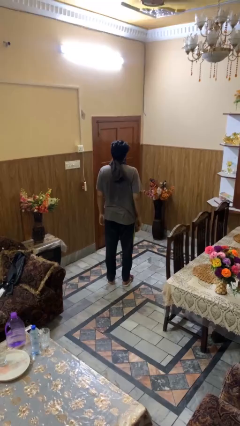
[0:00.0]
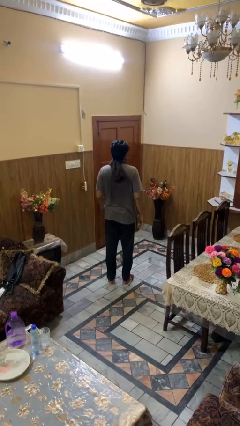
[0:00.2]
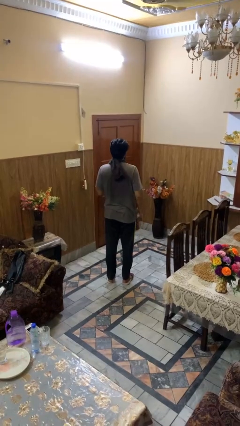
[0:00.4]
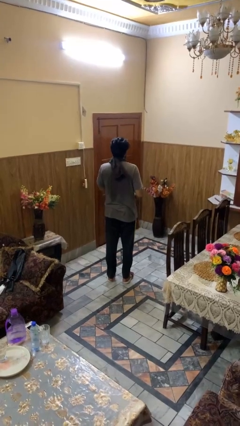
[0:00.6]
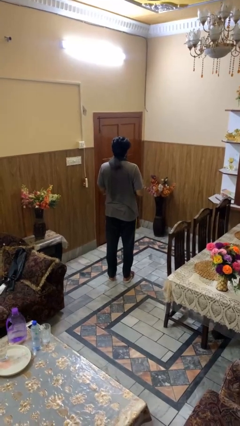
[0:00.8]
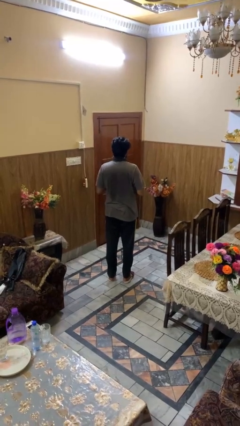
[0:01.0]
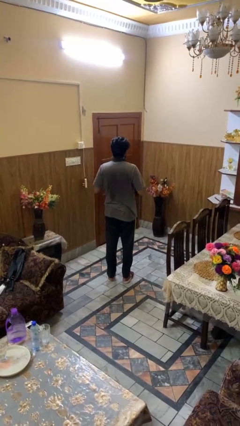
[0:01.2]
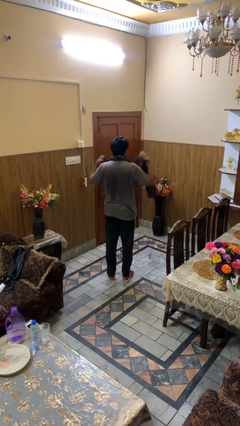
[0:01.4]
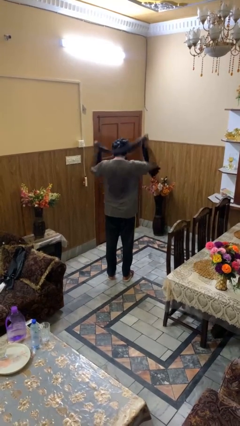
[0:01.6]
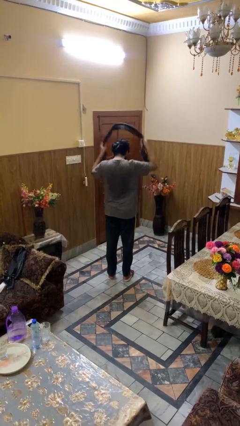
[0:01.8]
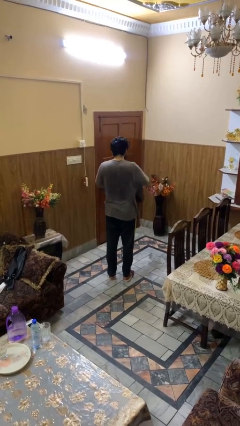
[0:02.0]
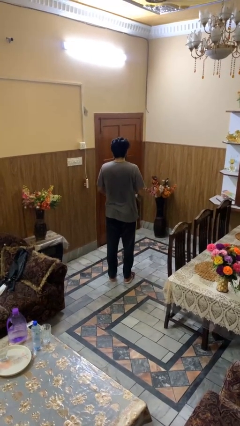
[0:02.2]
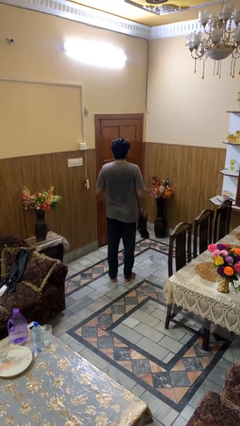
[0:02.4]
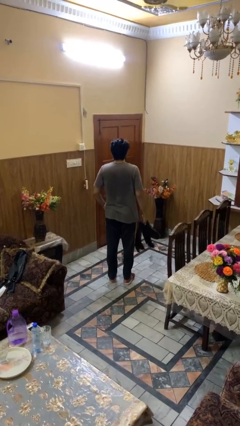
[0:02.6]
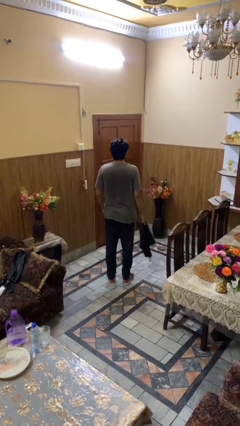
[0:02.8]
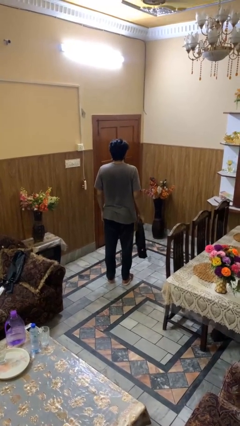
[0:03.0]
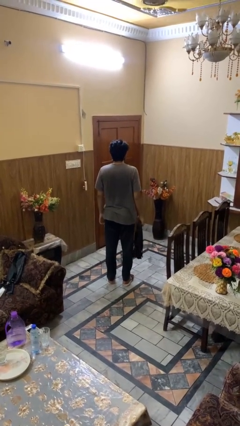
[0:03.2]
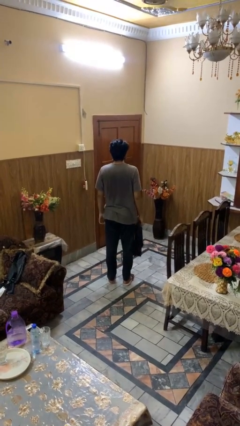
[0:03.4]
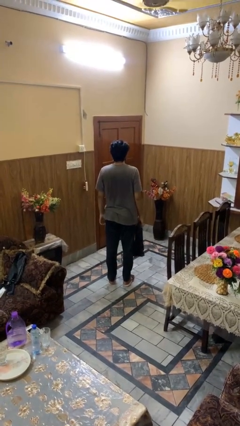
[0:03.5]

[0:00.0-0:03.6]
person takes off scarf

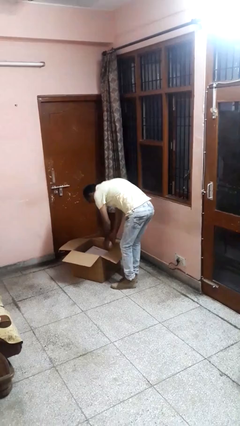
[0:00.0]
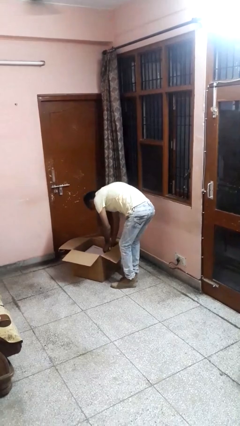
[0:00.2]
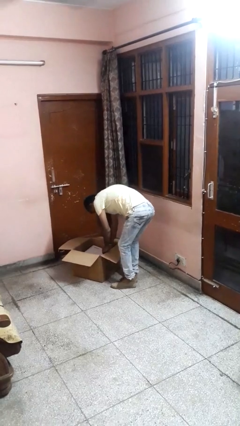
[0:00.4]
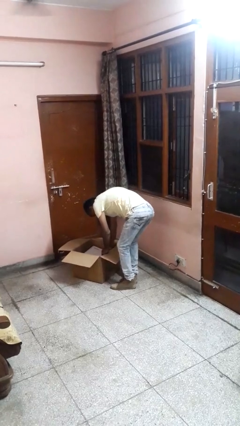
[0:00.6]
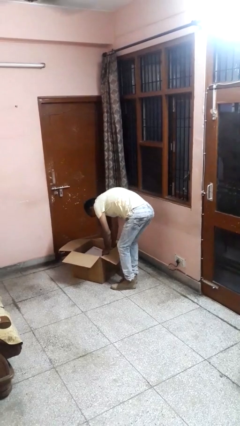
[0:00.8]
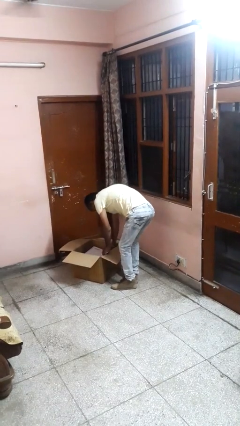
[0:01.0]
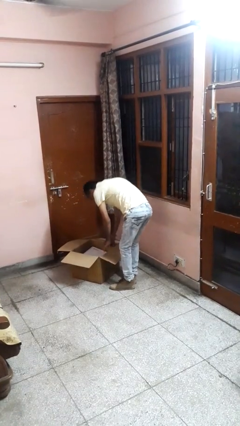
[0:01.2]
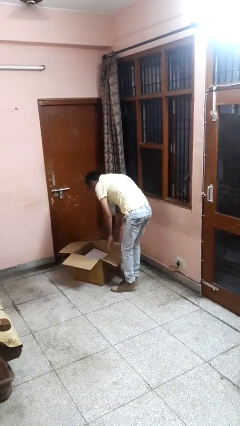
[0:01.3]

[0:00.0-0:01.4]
person puts object into box

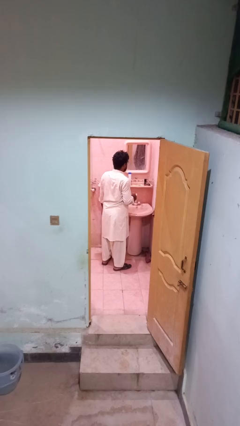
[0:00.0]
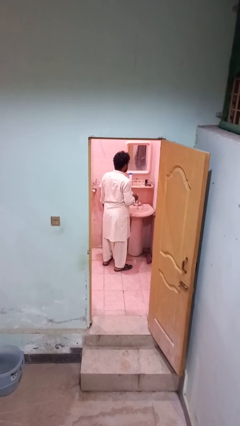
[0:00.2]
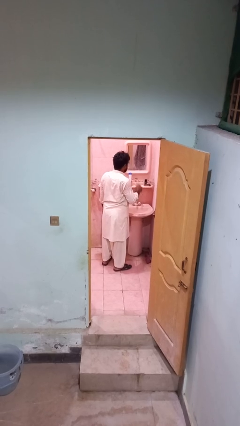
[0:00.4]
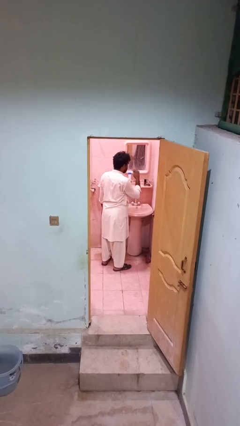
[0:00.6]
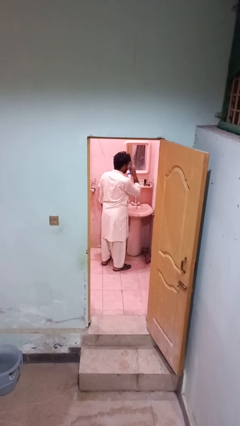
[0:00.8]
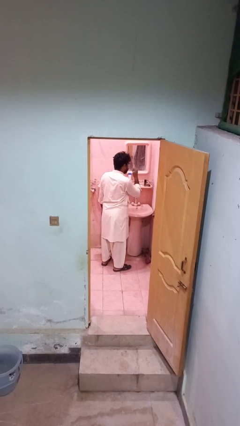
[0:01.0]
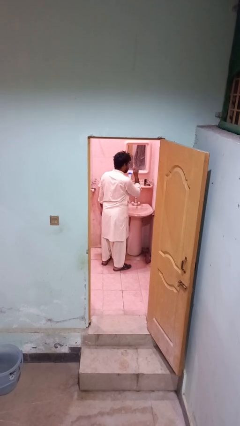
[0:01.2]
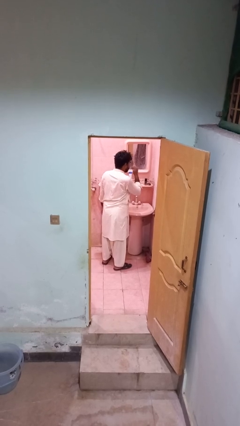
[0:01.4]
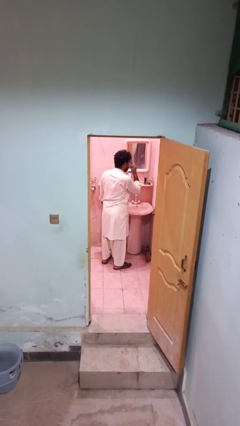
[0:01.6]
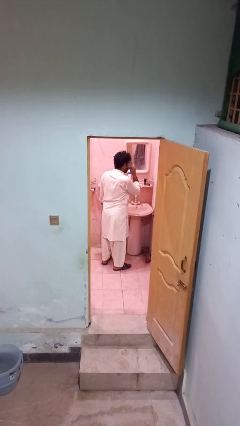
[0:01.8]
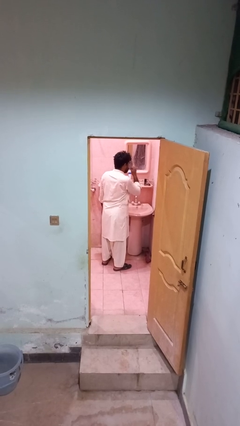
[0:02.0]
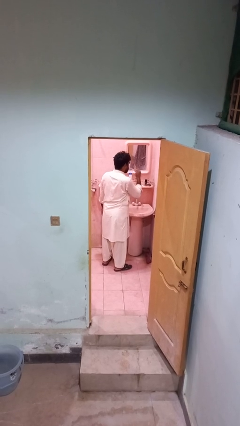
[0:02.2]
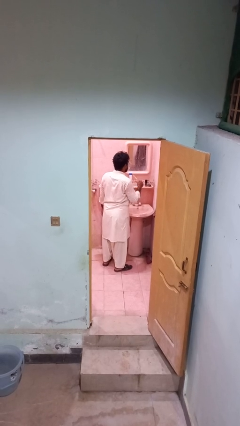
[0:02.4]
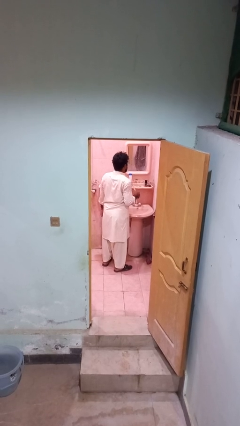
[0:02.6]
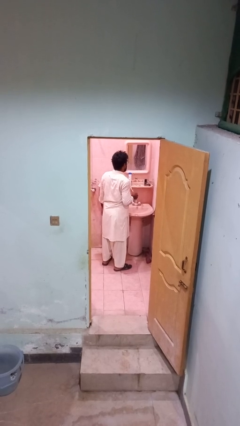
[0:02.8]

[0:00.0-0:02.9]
person brushes teeth

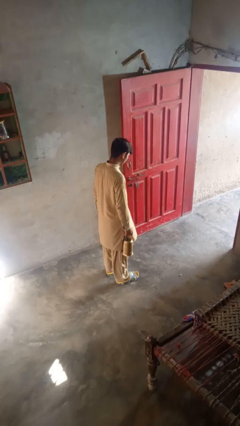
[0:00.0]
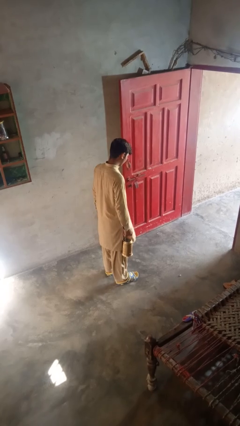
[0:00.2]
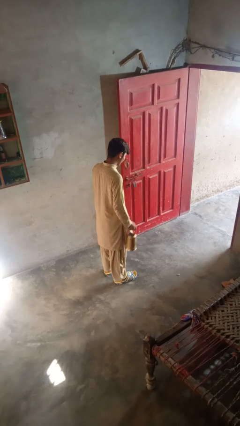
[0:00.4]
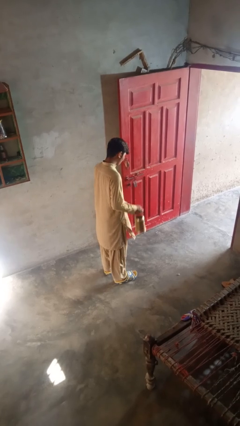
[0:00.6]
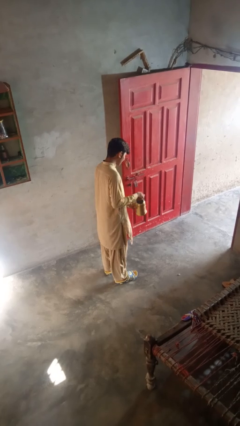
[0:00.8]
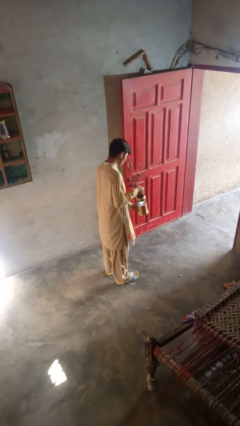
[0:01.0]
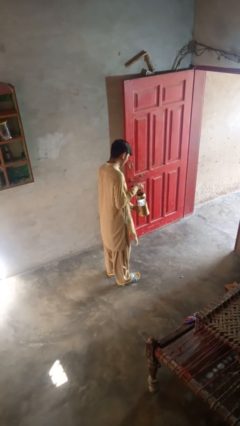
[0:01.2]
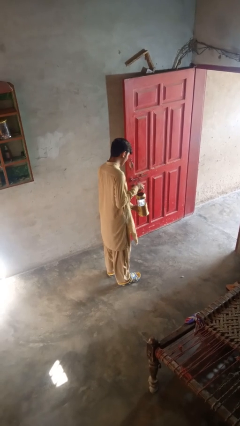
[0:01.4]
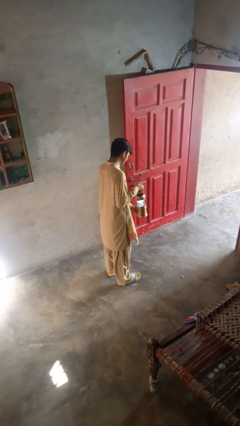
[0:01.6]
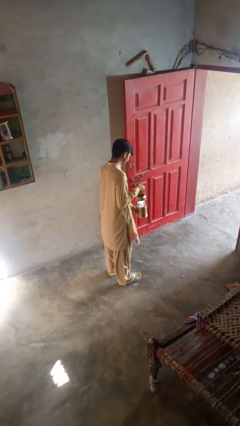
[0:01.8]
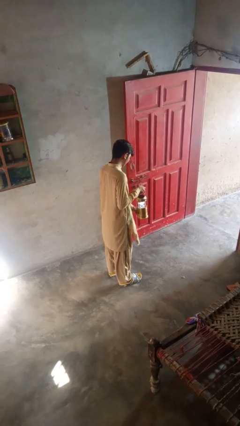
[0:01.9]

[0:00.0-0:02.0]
person turns on lamp

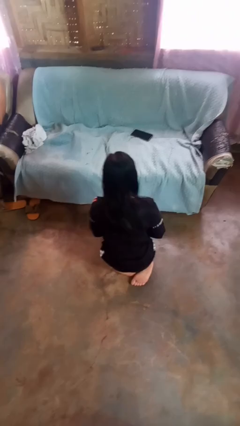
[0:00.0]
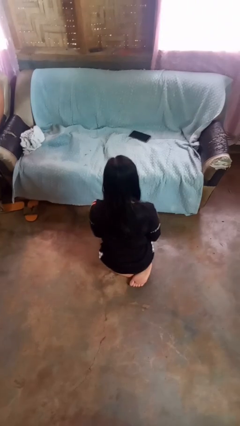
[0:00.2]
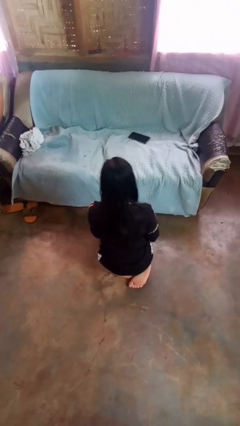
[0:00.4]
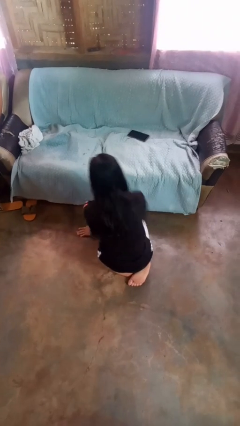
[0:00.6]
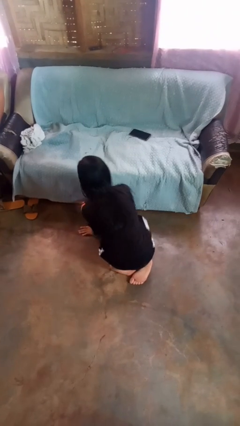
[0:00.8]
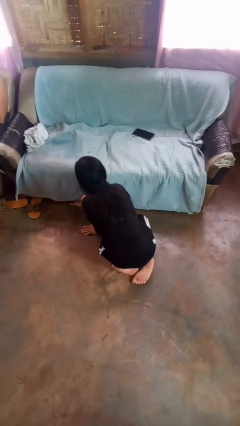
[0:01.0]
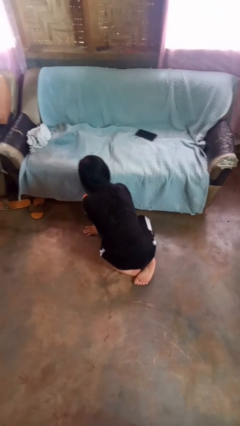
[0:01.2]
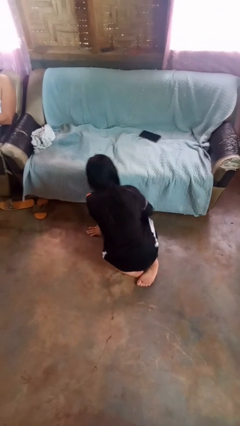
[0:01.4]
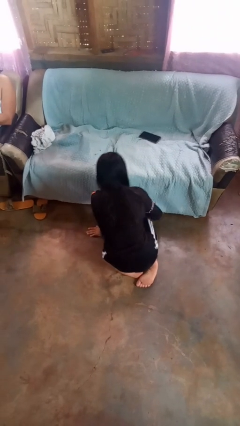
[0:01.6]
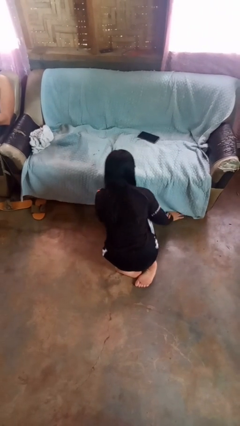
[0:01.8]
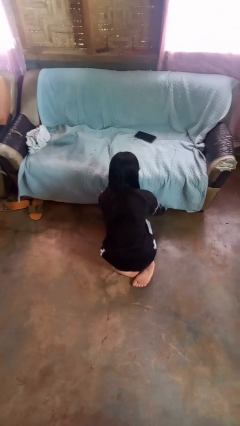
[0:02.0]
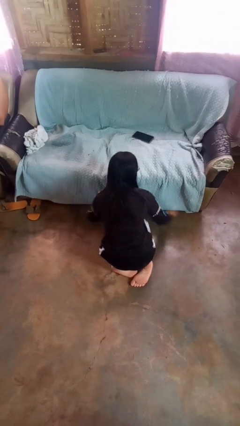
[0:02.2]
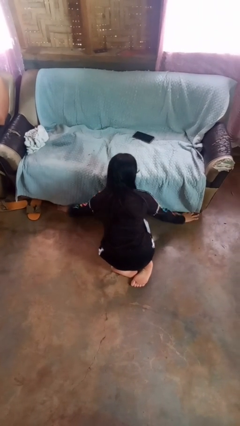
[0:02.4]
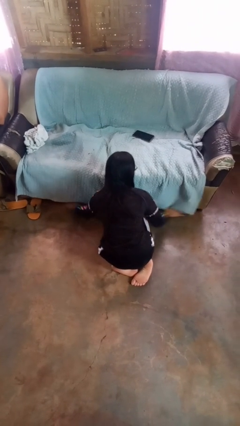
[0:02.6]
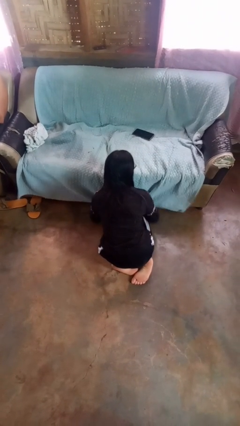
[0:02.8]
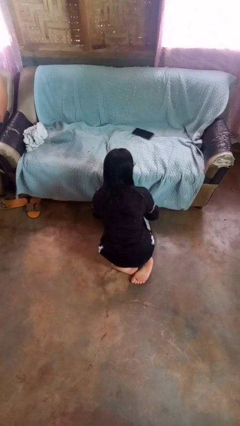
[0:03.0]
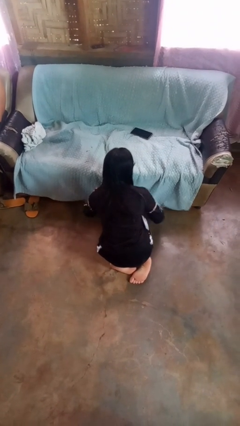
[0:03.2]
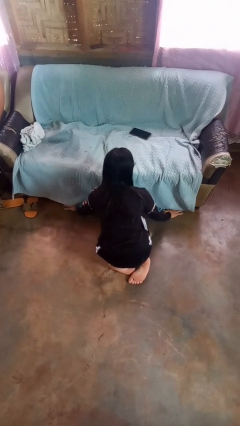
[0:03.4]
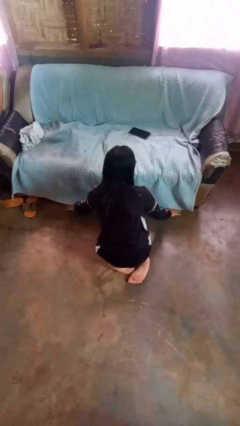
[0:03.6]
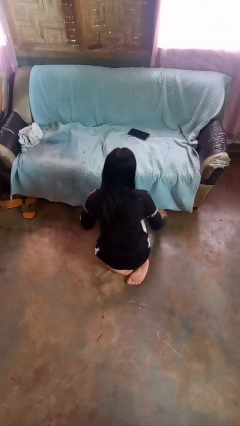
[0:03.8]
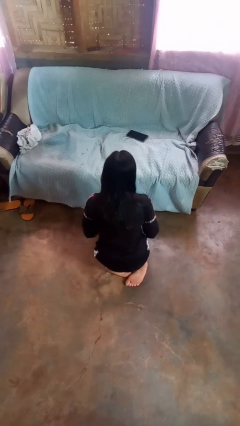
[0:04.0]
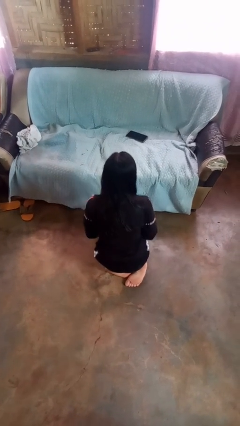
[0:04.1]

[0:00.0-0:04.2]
person searches under couch

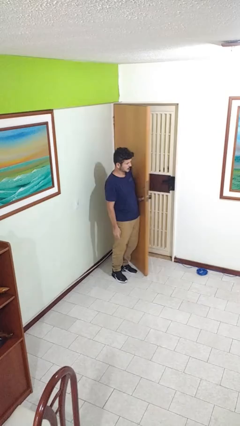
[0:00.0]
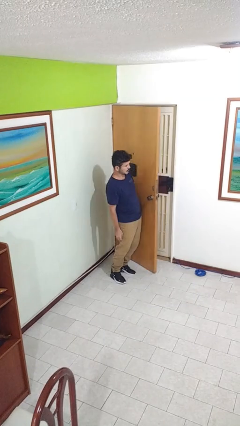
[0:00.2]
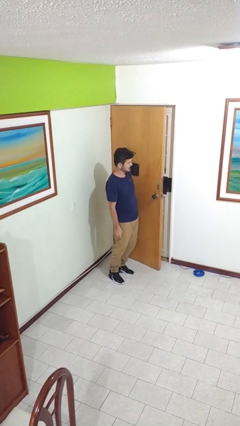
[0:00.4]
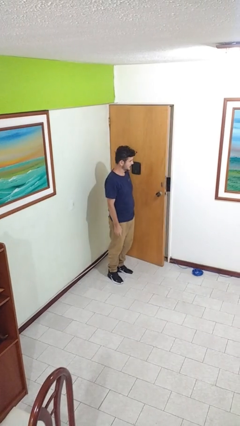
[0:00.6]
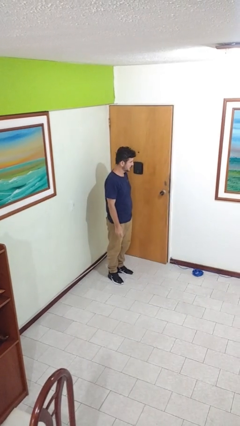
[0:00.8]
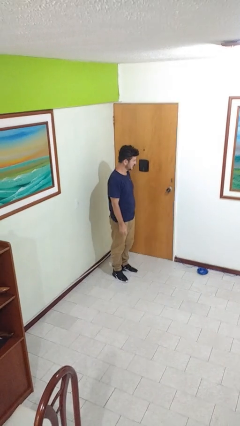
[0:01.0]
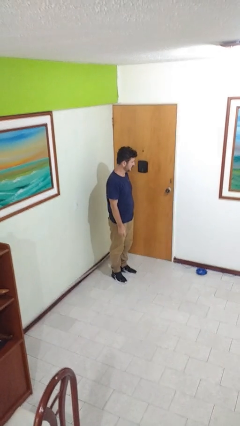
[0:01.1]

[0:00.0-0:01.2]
person closes door with hip

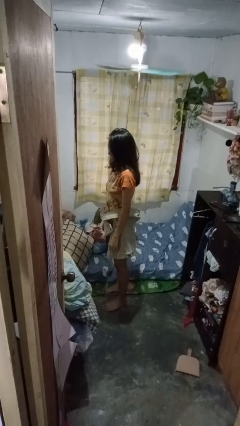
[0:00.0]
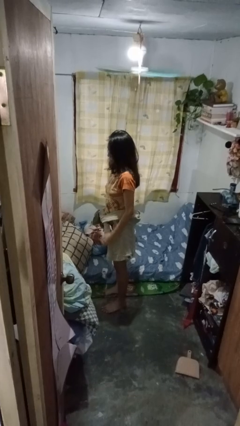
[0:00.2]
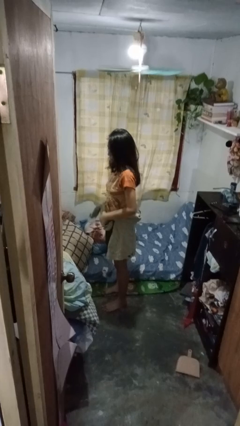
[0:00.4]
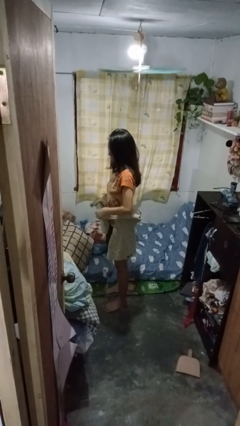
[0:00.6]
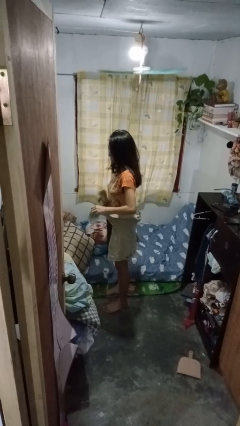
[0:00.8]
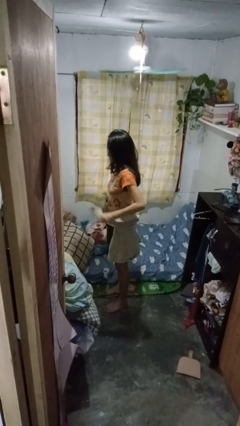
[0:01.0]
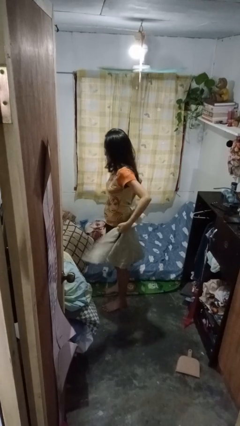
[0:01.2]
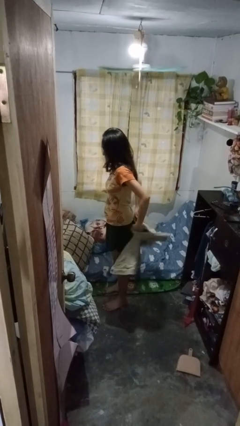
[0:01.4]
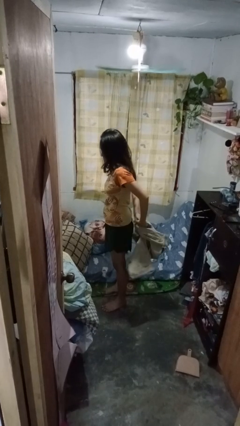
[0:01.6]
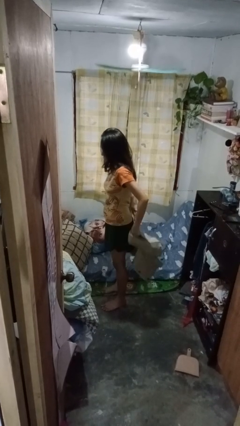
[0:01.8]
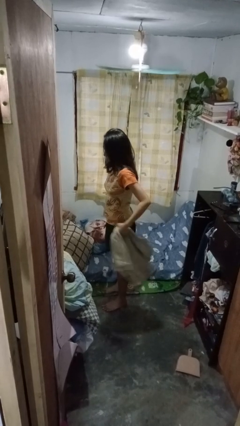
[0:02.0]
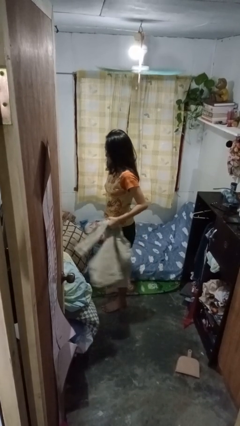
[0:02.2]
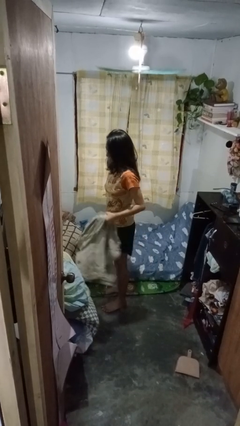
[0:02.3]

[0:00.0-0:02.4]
person unties jacket around waist
